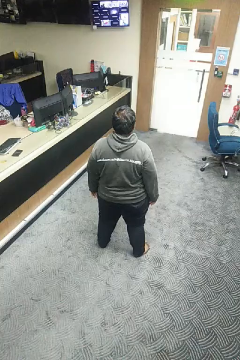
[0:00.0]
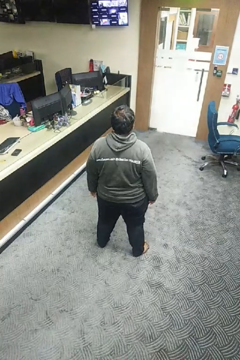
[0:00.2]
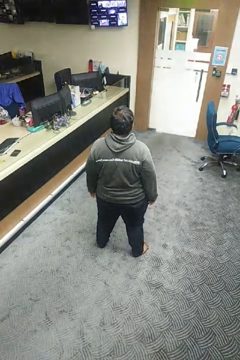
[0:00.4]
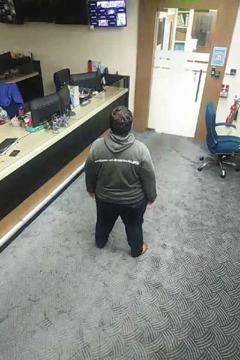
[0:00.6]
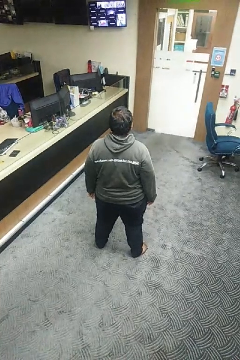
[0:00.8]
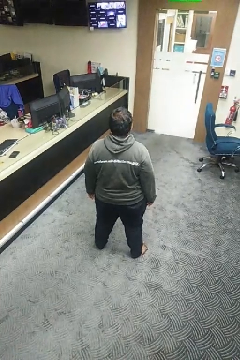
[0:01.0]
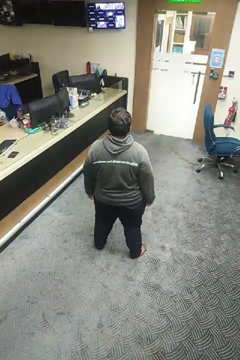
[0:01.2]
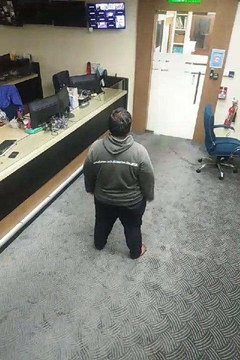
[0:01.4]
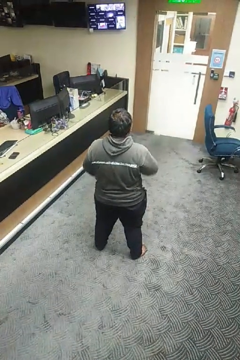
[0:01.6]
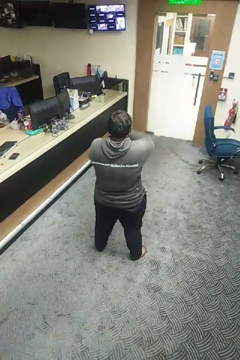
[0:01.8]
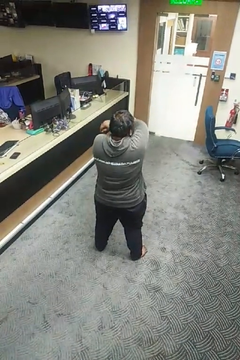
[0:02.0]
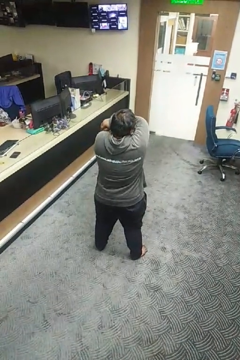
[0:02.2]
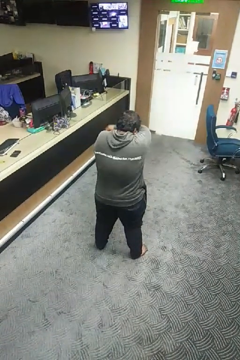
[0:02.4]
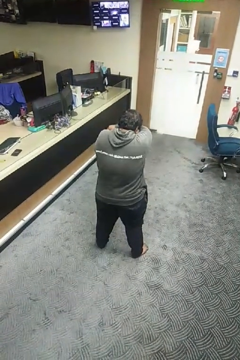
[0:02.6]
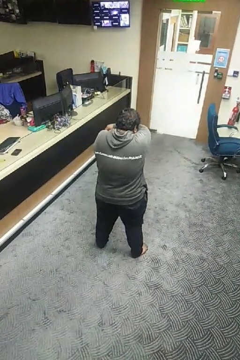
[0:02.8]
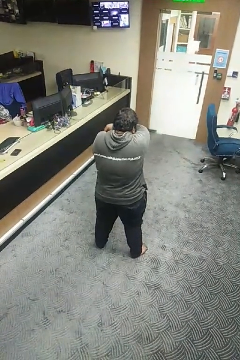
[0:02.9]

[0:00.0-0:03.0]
person sneezes into arm

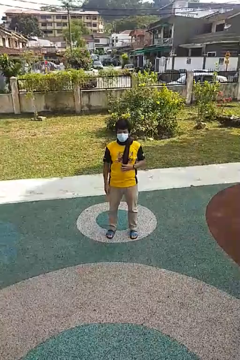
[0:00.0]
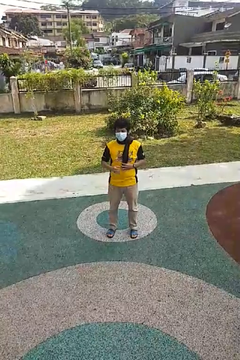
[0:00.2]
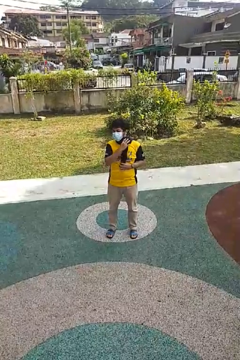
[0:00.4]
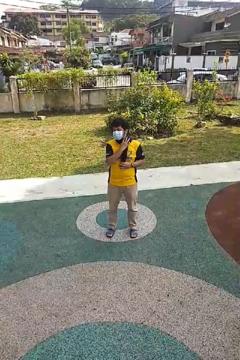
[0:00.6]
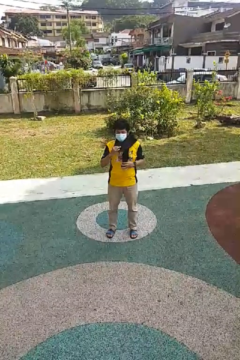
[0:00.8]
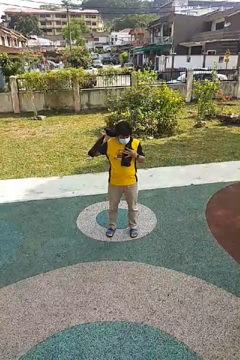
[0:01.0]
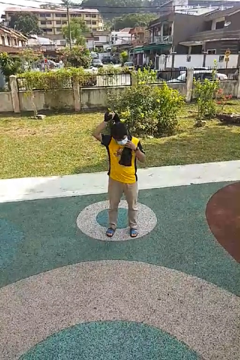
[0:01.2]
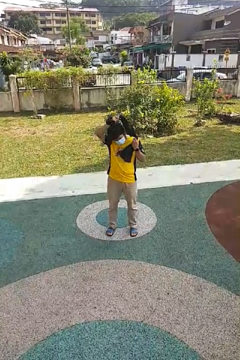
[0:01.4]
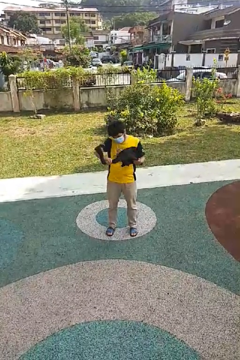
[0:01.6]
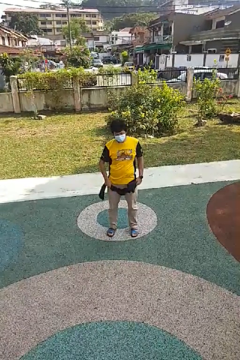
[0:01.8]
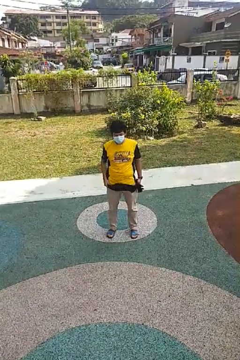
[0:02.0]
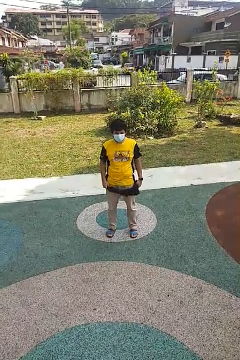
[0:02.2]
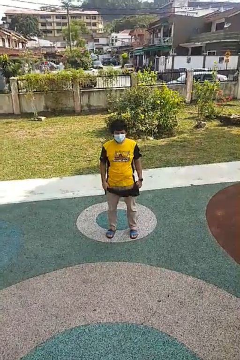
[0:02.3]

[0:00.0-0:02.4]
person takes off scarf

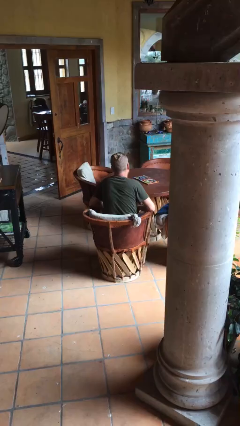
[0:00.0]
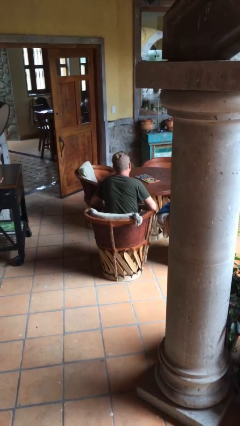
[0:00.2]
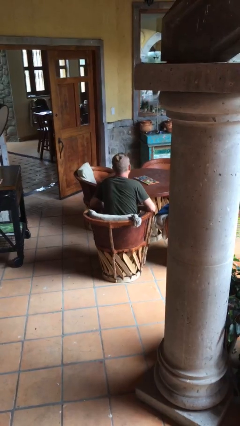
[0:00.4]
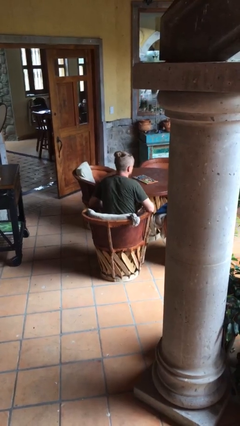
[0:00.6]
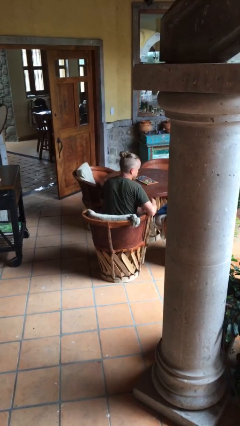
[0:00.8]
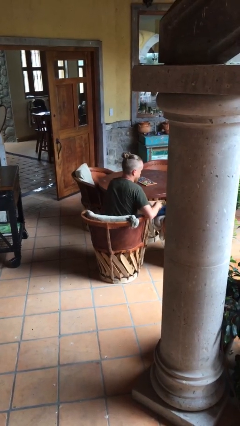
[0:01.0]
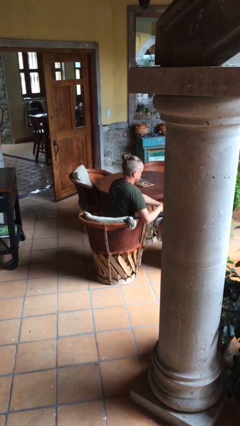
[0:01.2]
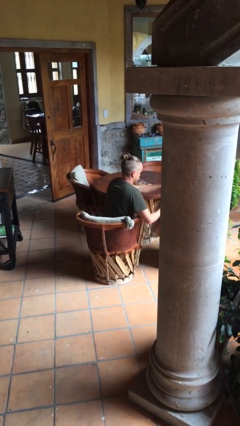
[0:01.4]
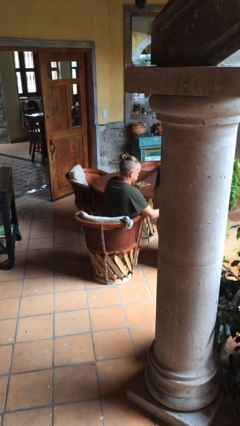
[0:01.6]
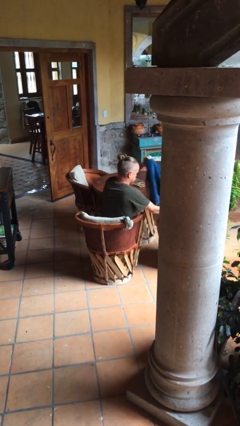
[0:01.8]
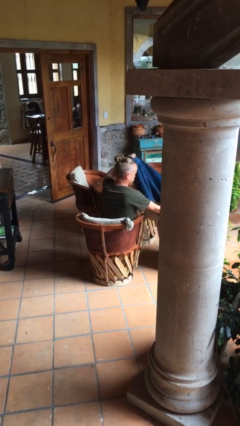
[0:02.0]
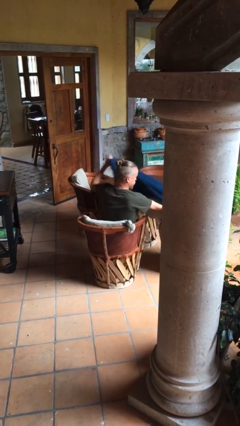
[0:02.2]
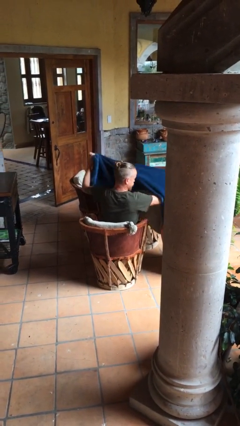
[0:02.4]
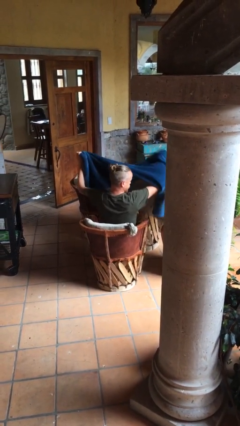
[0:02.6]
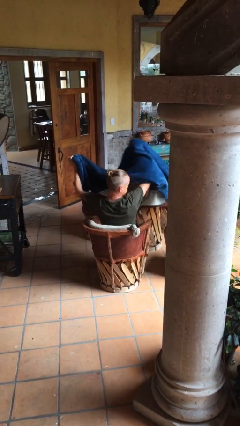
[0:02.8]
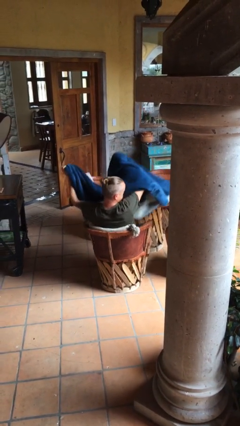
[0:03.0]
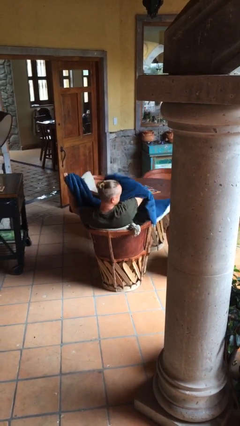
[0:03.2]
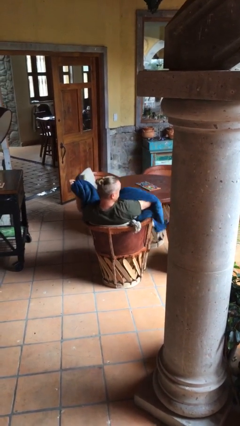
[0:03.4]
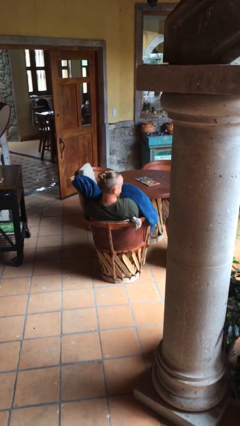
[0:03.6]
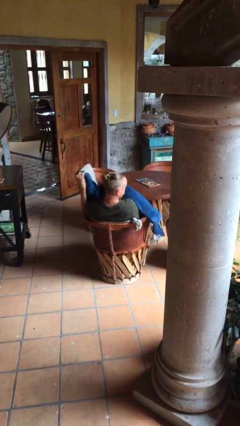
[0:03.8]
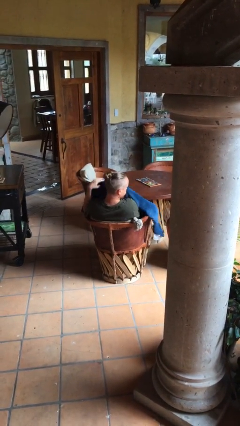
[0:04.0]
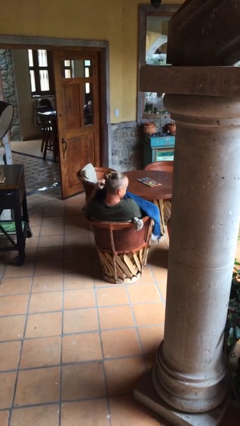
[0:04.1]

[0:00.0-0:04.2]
person covers with blanket

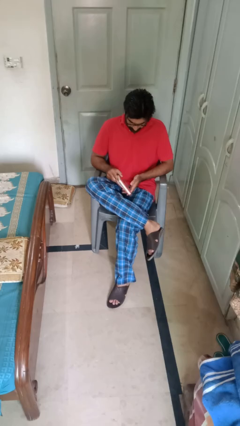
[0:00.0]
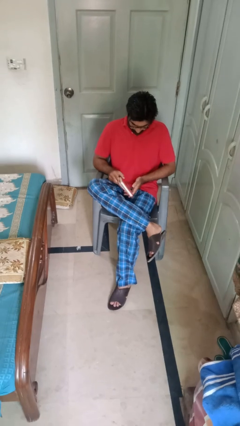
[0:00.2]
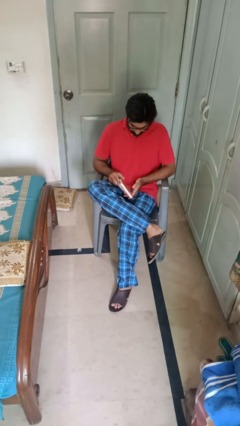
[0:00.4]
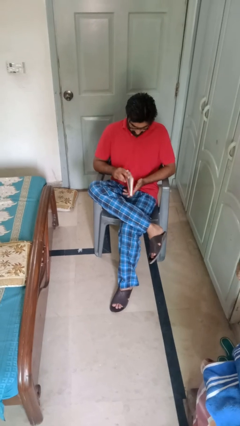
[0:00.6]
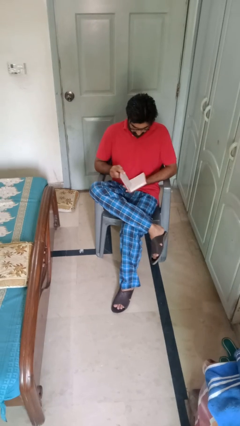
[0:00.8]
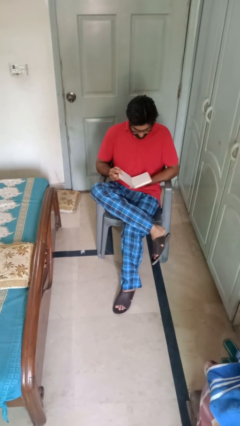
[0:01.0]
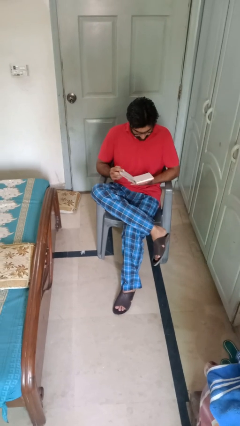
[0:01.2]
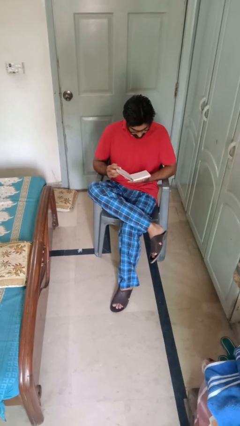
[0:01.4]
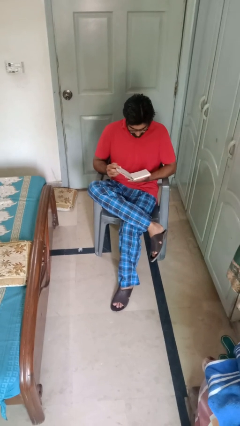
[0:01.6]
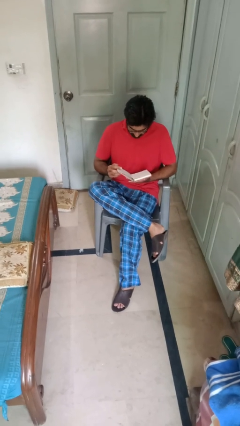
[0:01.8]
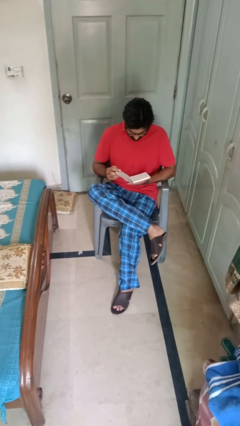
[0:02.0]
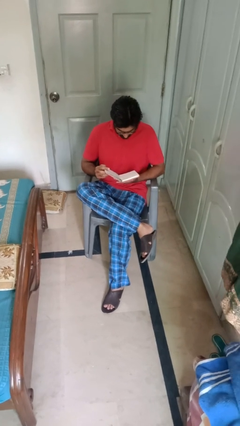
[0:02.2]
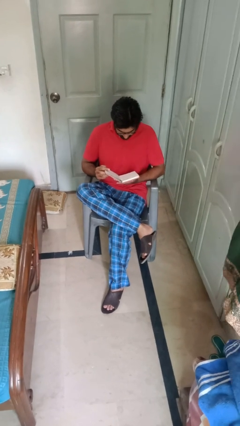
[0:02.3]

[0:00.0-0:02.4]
person reads book

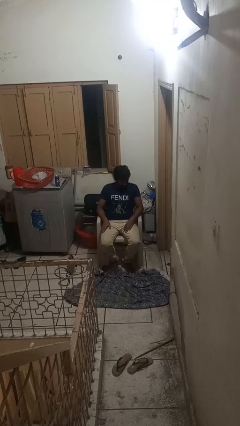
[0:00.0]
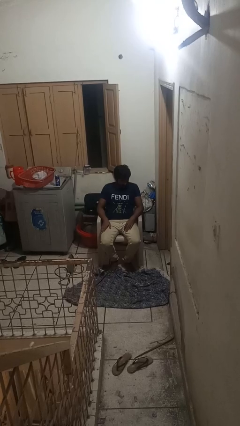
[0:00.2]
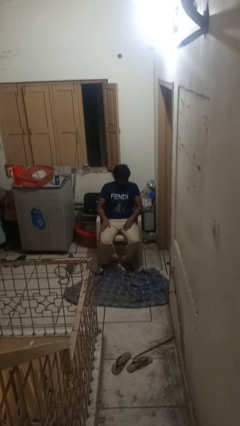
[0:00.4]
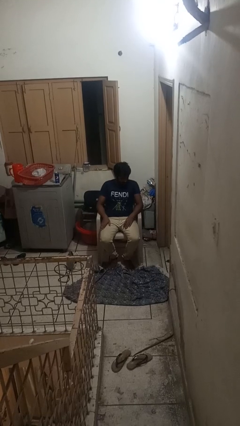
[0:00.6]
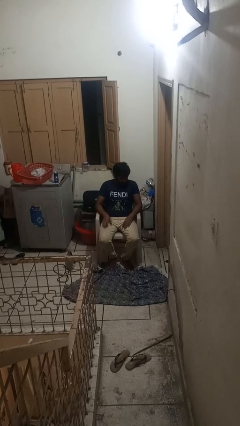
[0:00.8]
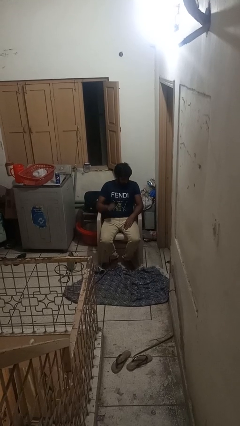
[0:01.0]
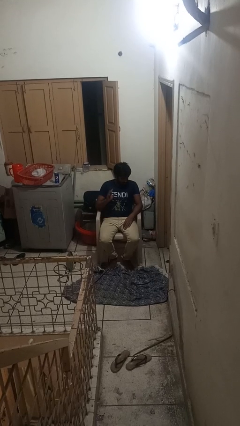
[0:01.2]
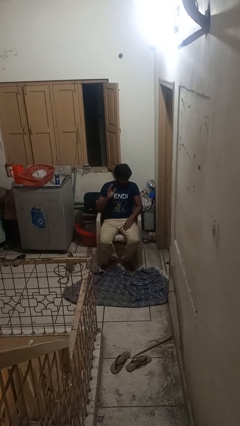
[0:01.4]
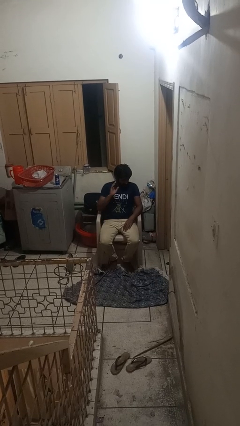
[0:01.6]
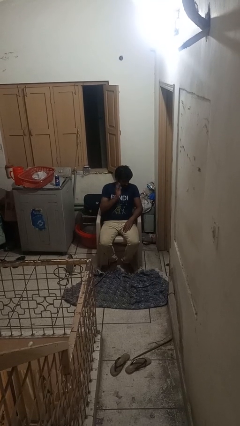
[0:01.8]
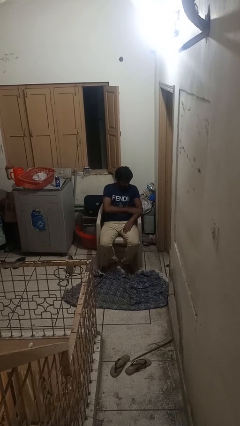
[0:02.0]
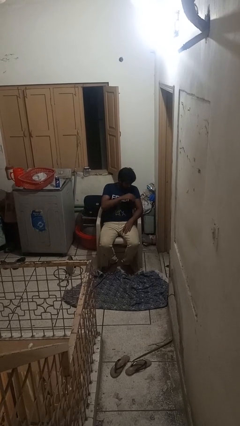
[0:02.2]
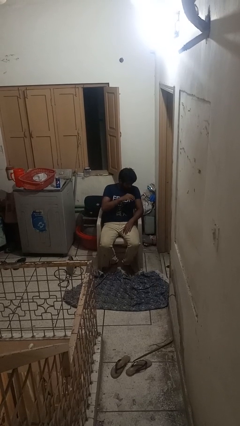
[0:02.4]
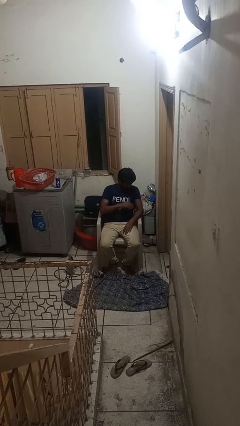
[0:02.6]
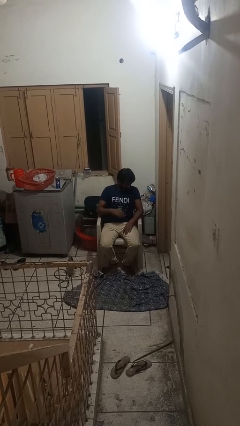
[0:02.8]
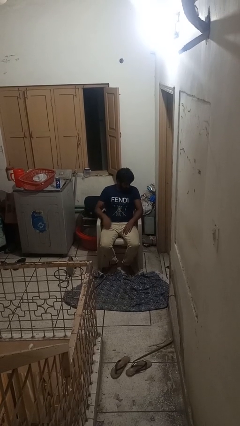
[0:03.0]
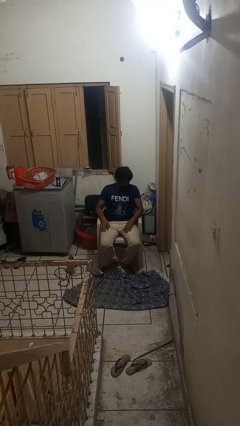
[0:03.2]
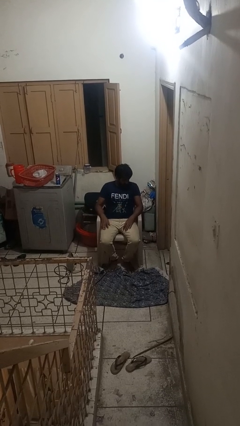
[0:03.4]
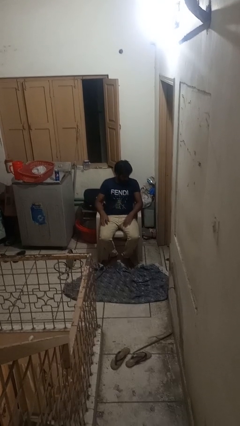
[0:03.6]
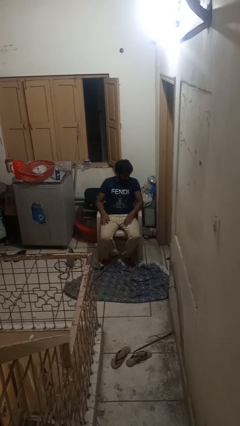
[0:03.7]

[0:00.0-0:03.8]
person swats bug

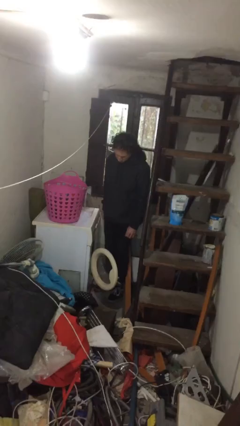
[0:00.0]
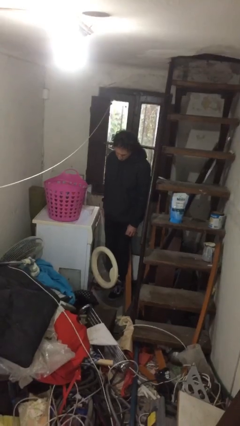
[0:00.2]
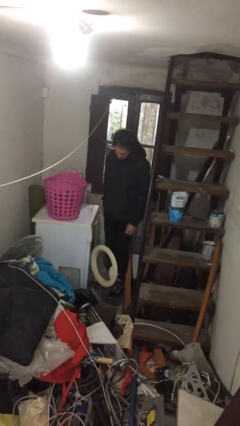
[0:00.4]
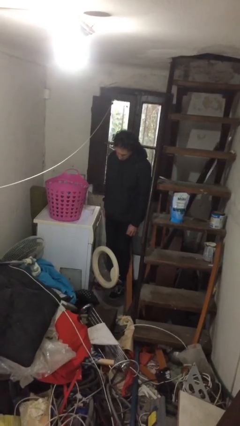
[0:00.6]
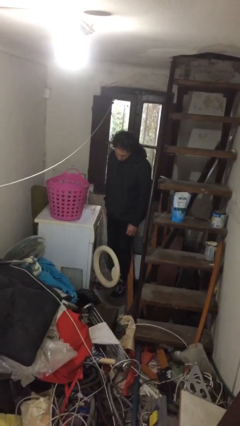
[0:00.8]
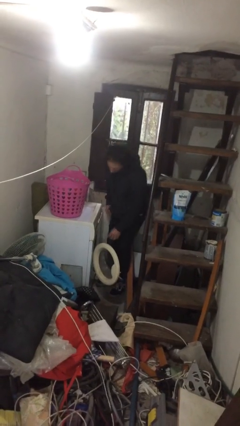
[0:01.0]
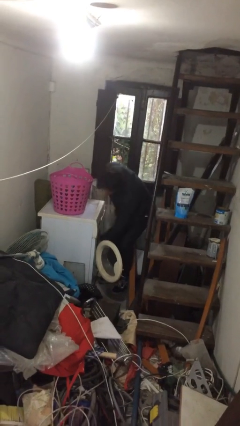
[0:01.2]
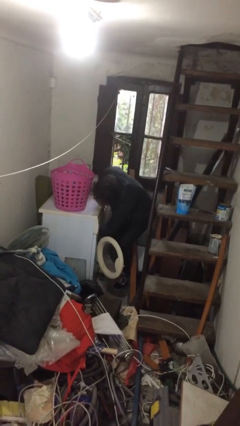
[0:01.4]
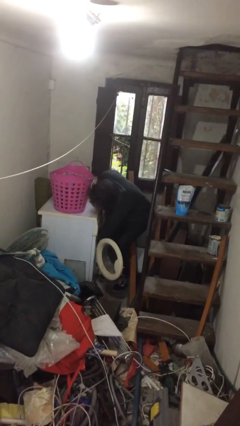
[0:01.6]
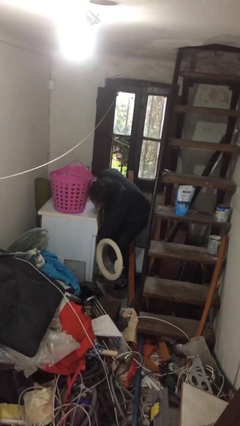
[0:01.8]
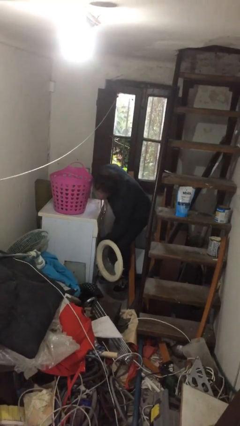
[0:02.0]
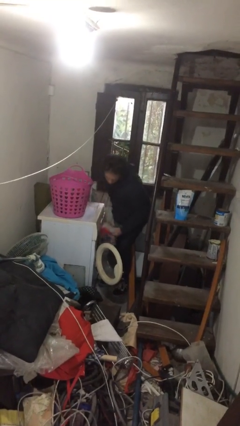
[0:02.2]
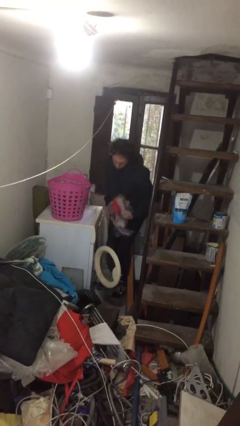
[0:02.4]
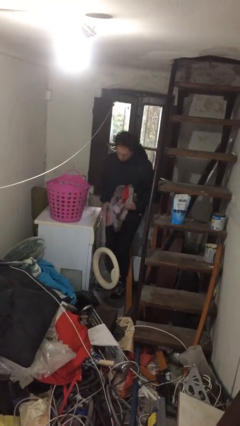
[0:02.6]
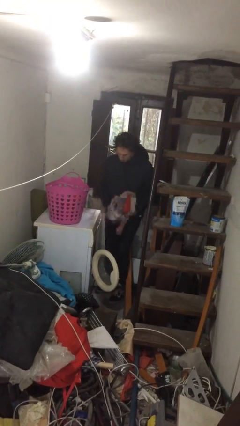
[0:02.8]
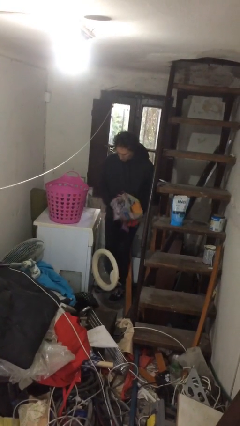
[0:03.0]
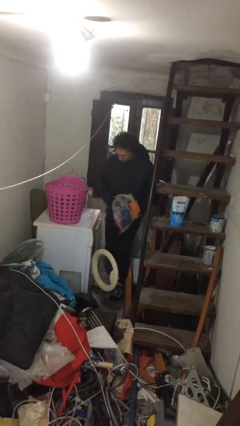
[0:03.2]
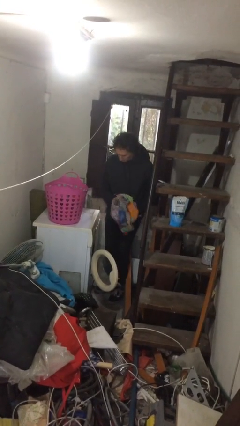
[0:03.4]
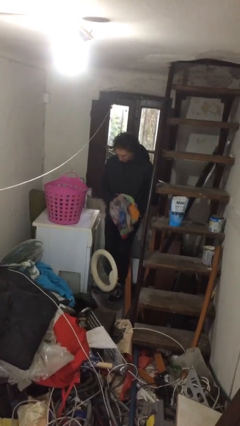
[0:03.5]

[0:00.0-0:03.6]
person unloads clotheswasher
